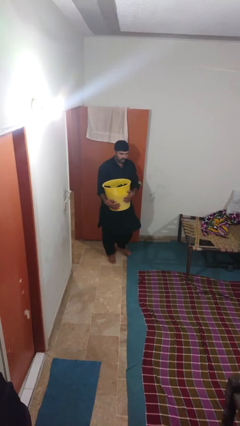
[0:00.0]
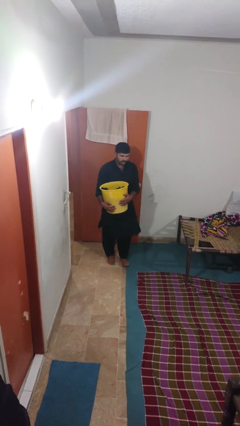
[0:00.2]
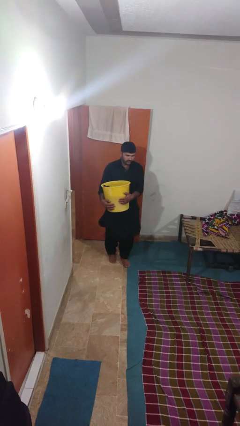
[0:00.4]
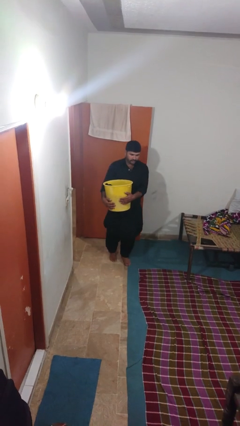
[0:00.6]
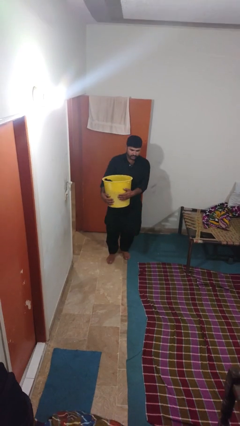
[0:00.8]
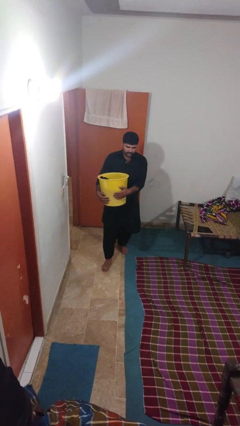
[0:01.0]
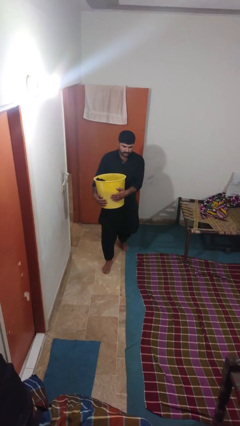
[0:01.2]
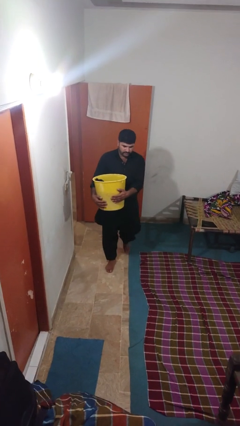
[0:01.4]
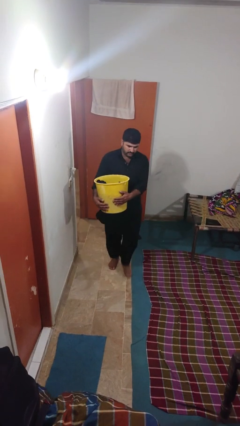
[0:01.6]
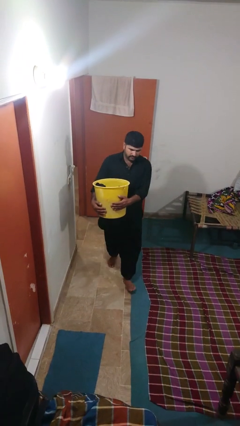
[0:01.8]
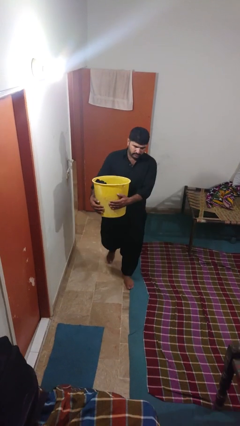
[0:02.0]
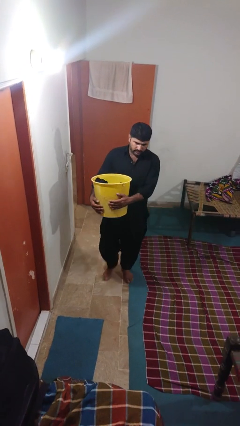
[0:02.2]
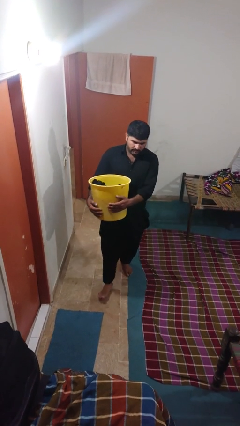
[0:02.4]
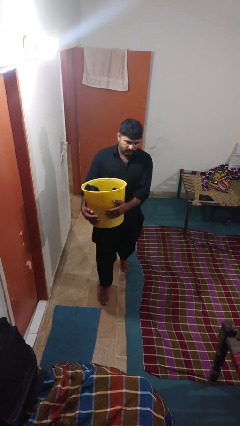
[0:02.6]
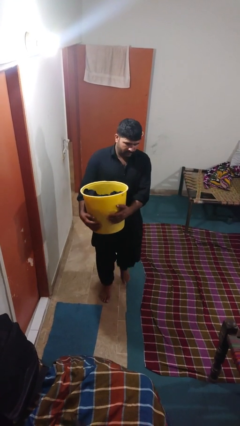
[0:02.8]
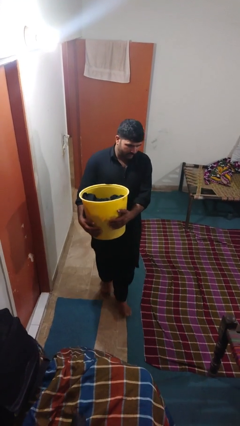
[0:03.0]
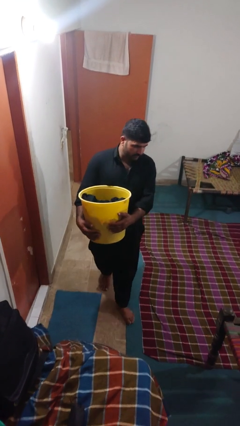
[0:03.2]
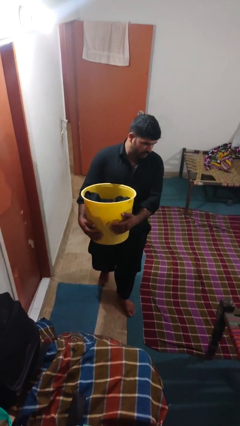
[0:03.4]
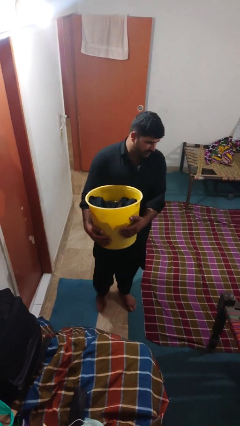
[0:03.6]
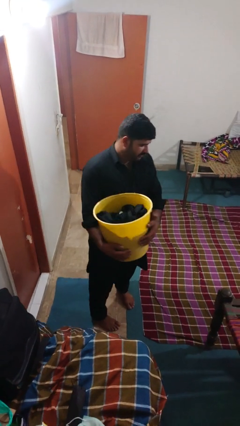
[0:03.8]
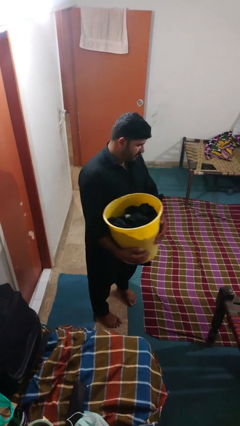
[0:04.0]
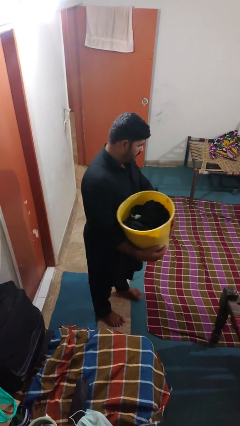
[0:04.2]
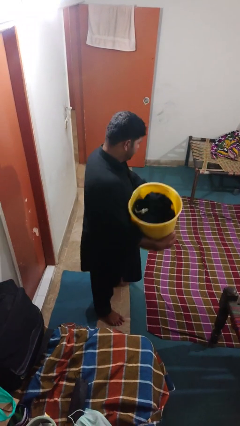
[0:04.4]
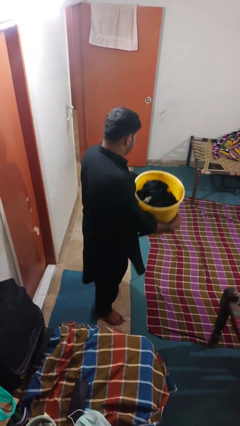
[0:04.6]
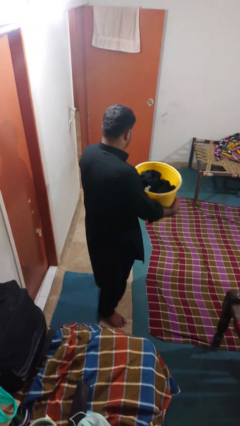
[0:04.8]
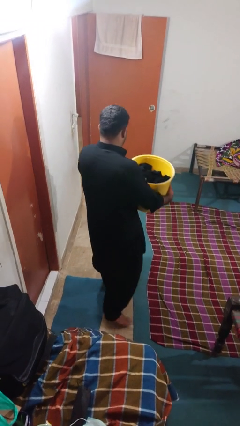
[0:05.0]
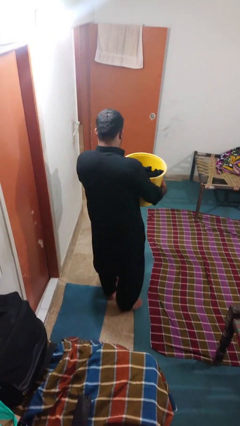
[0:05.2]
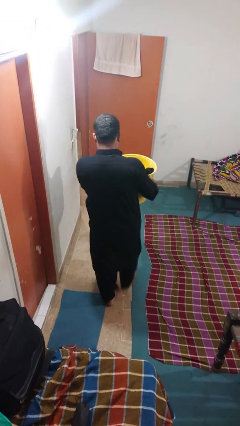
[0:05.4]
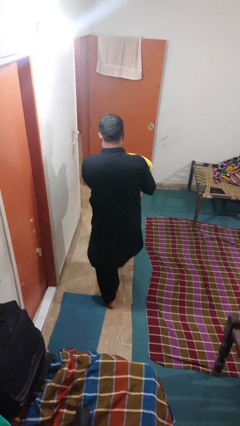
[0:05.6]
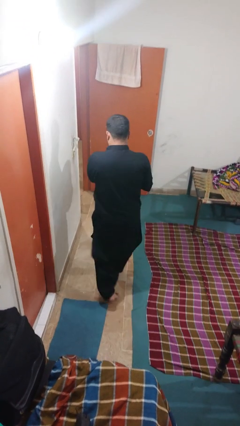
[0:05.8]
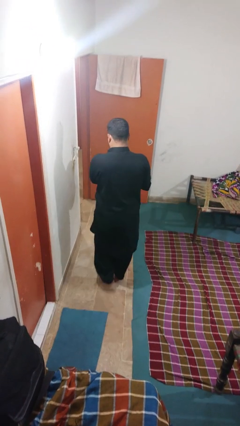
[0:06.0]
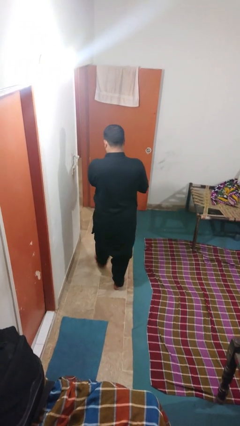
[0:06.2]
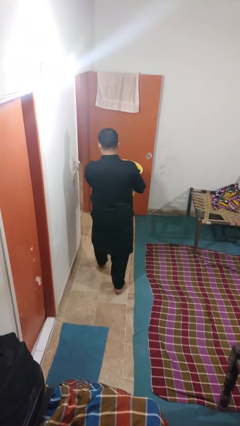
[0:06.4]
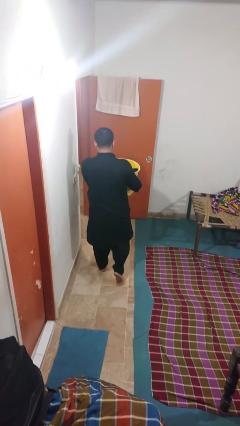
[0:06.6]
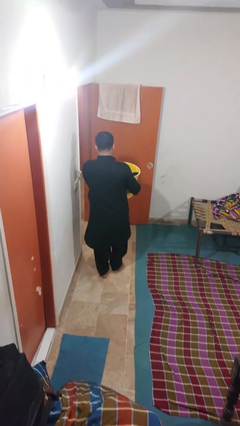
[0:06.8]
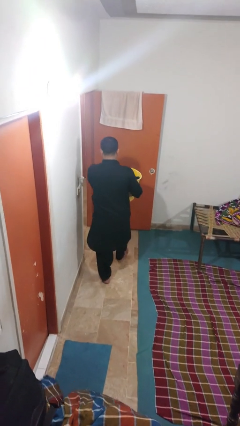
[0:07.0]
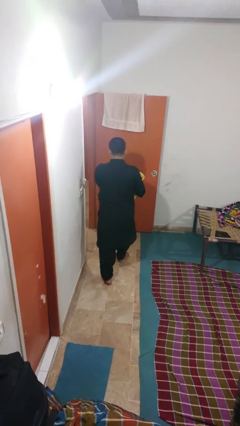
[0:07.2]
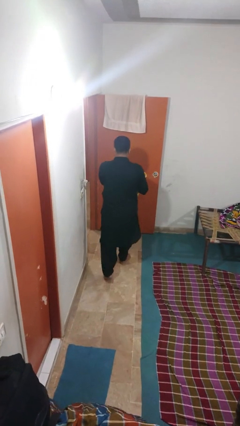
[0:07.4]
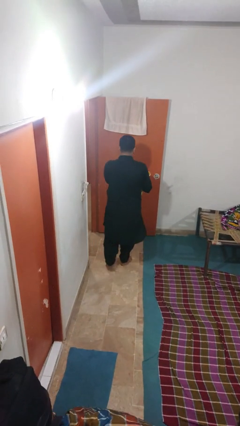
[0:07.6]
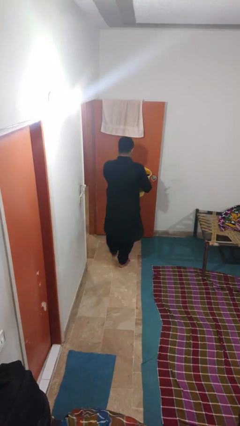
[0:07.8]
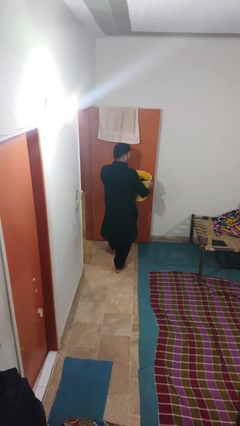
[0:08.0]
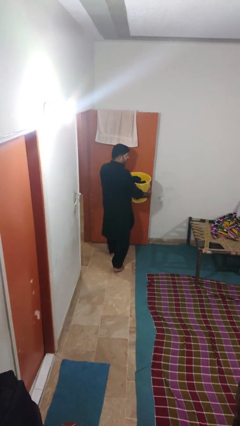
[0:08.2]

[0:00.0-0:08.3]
person carries laundry basket

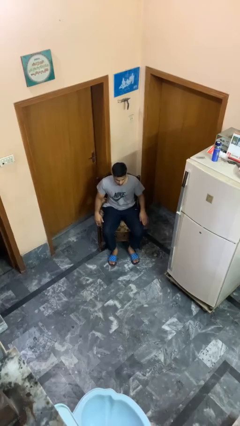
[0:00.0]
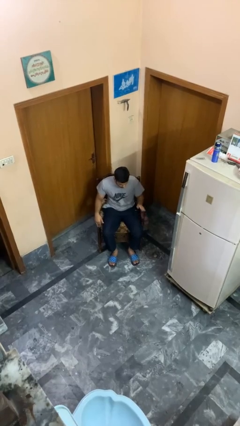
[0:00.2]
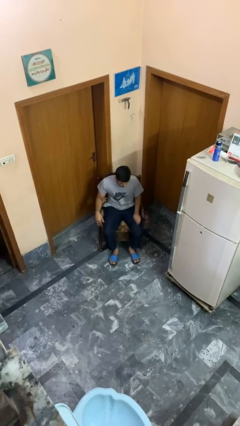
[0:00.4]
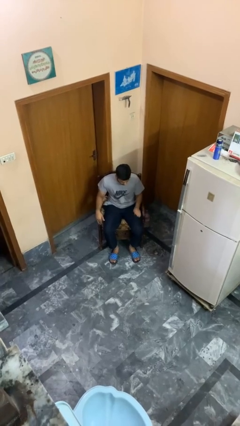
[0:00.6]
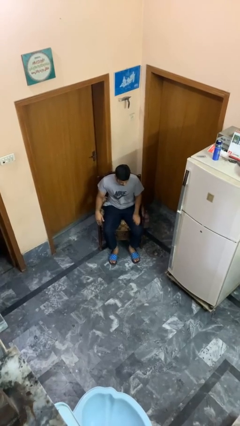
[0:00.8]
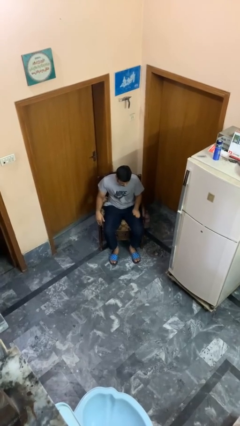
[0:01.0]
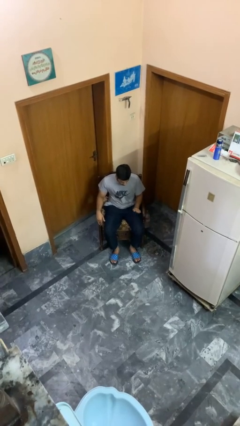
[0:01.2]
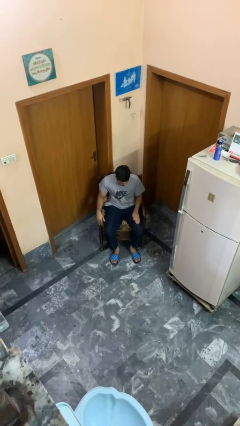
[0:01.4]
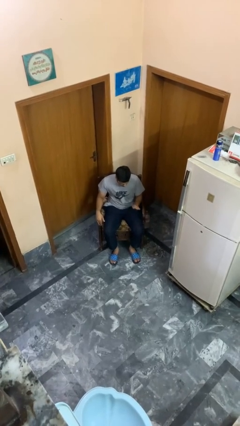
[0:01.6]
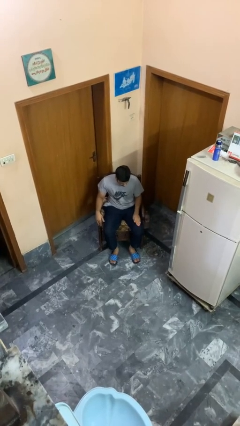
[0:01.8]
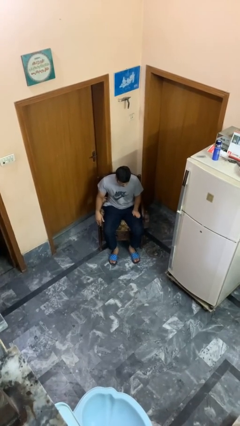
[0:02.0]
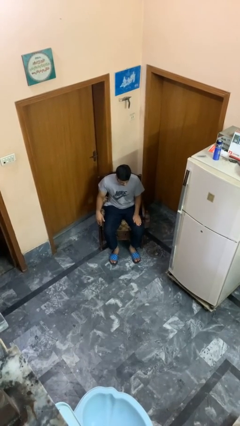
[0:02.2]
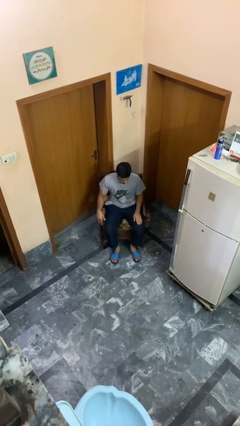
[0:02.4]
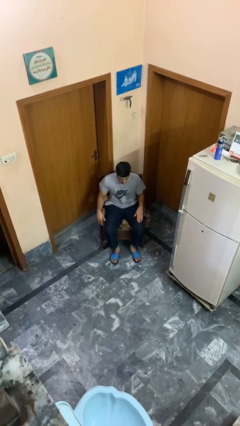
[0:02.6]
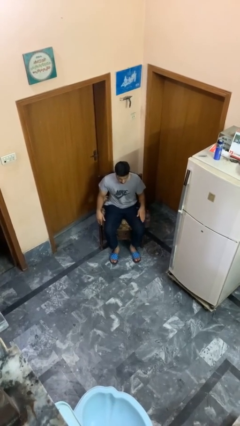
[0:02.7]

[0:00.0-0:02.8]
person slaps hands on thighs

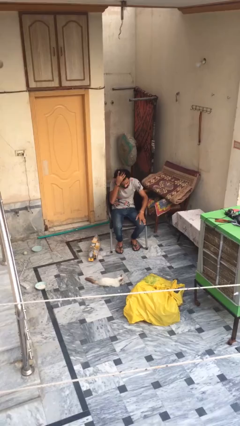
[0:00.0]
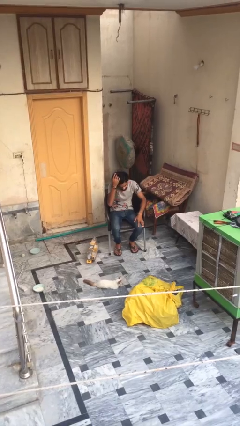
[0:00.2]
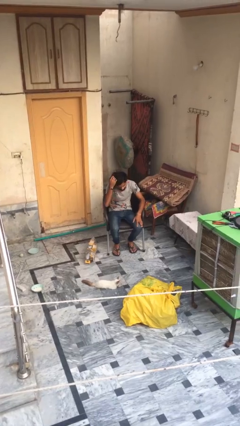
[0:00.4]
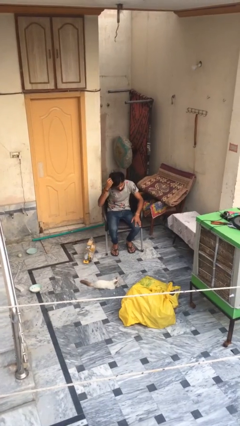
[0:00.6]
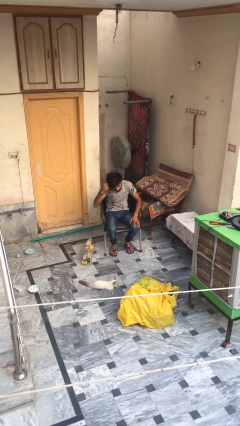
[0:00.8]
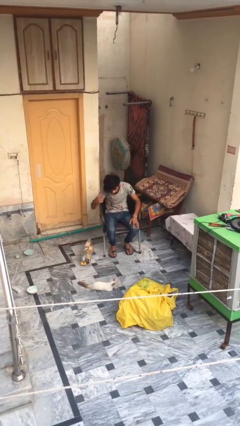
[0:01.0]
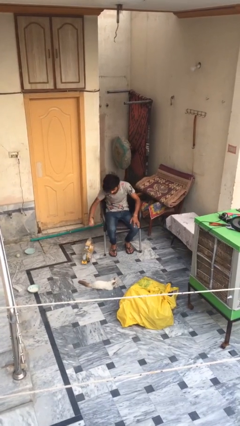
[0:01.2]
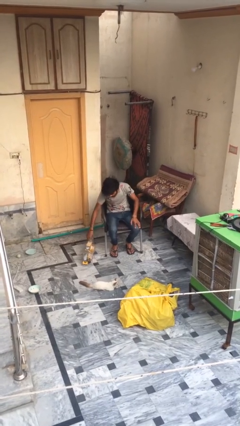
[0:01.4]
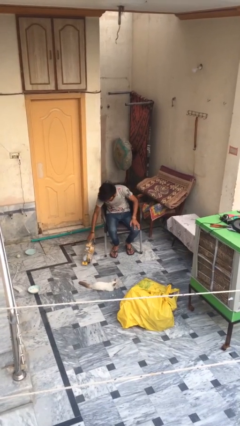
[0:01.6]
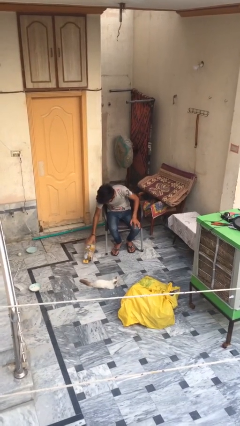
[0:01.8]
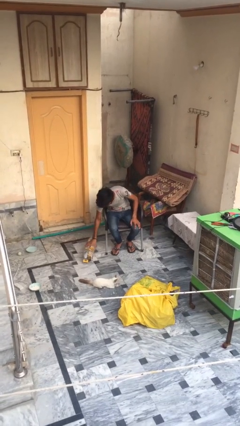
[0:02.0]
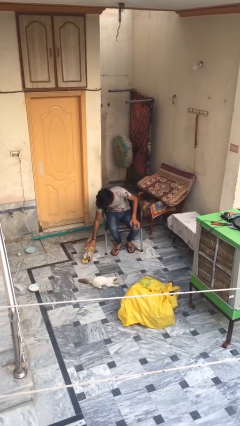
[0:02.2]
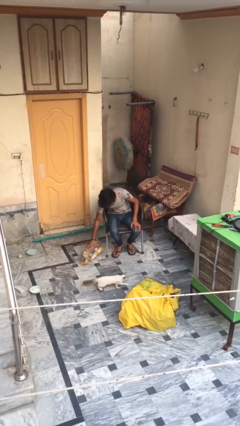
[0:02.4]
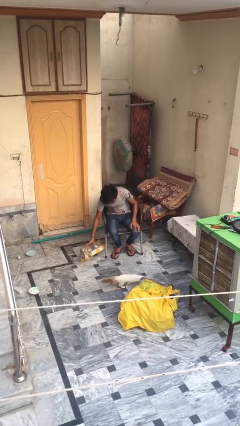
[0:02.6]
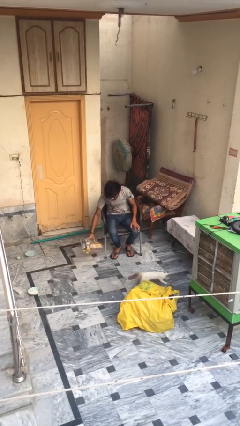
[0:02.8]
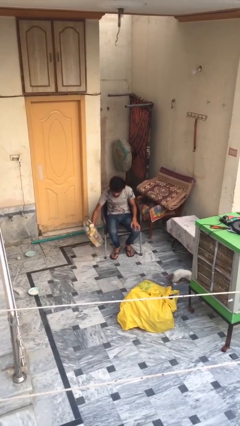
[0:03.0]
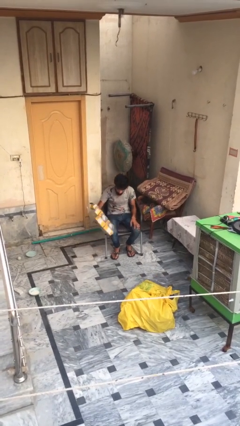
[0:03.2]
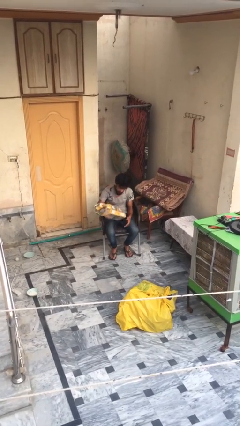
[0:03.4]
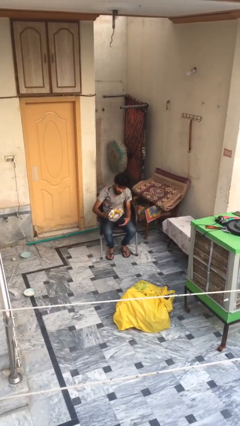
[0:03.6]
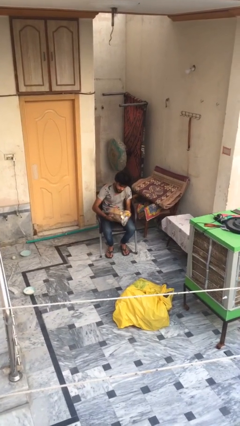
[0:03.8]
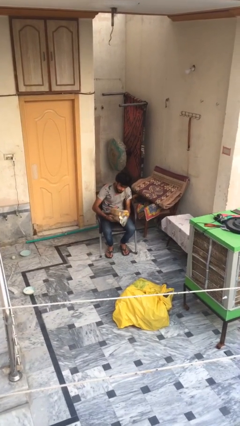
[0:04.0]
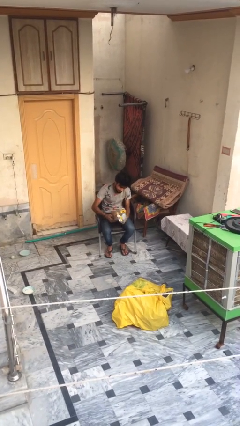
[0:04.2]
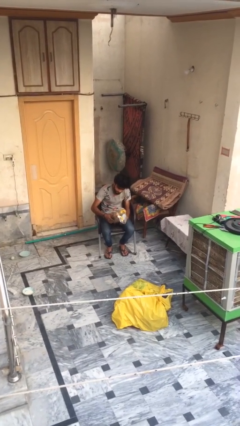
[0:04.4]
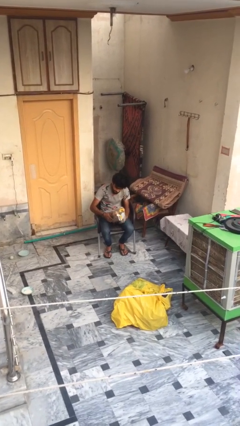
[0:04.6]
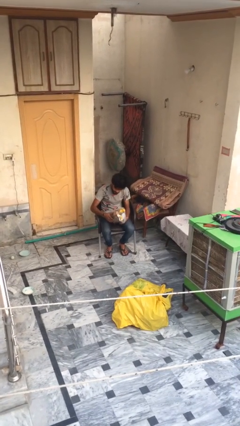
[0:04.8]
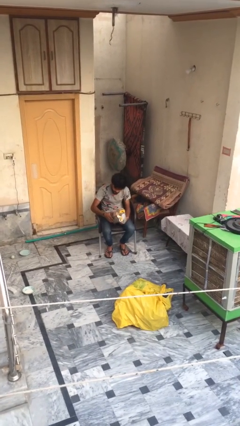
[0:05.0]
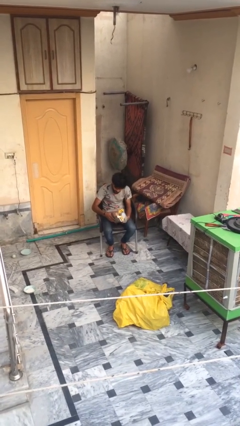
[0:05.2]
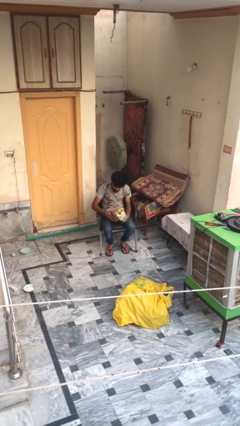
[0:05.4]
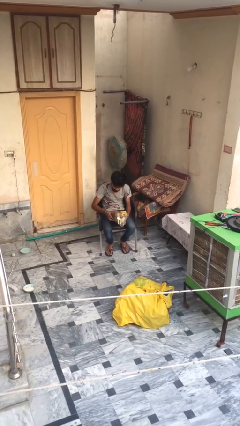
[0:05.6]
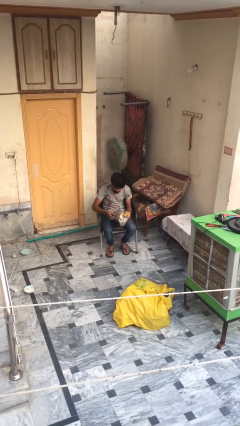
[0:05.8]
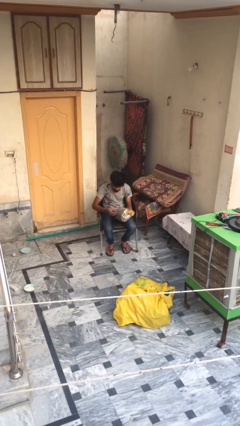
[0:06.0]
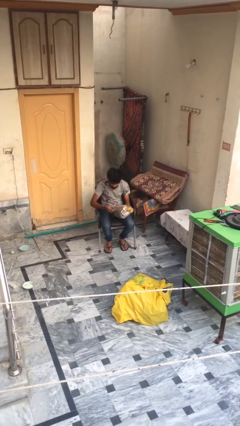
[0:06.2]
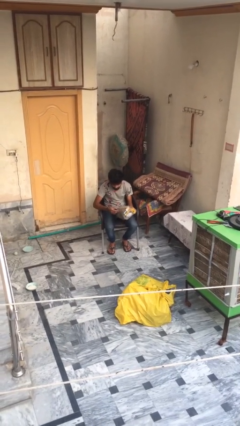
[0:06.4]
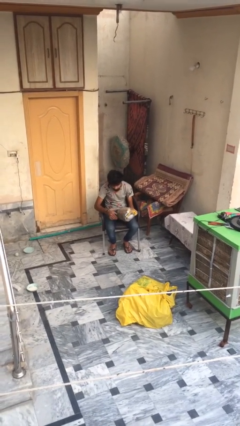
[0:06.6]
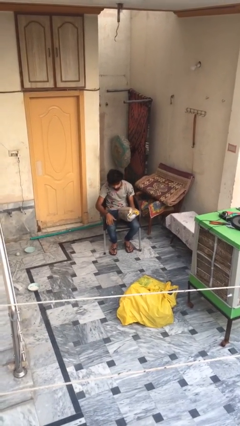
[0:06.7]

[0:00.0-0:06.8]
person picks up object from floor
